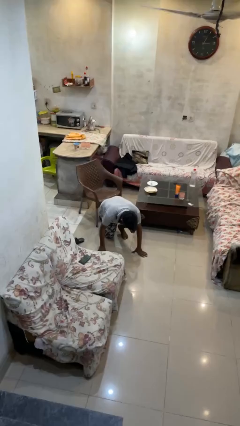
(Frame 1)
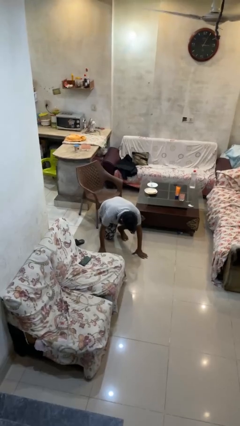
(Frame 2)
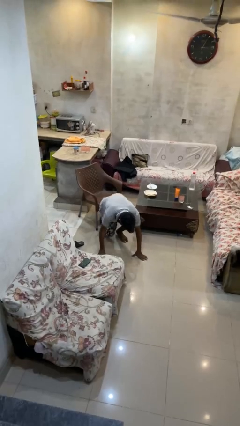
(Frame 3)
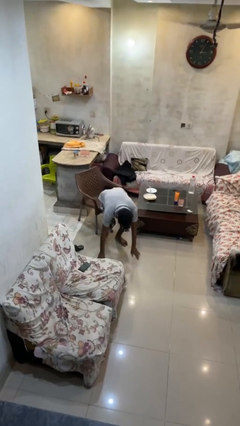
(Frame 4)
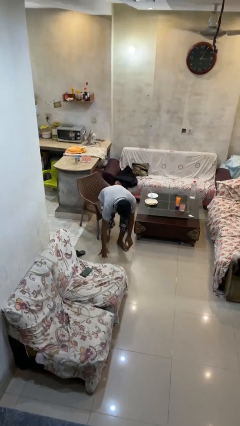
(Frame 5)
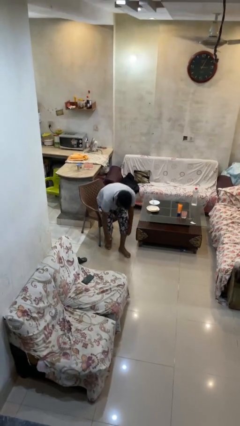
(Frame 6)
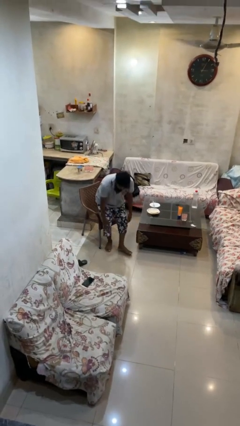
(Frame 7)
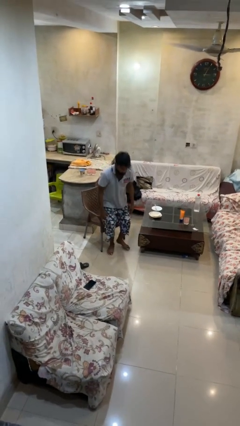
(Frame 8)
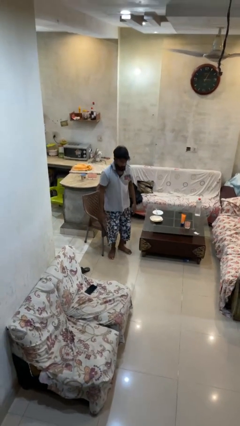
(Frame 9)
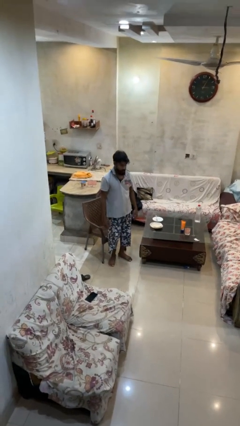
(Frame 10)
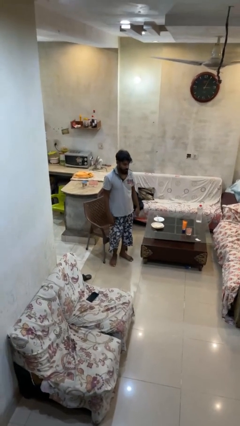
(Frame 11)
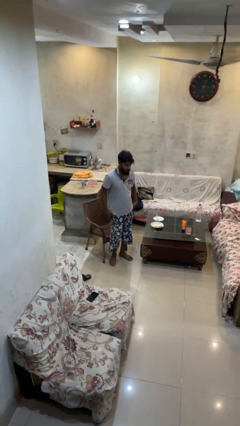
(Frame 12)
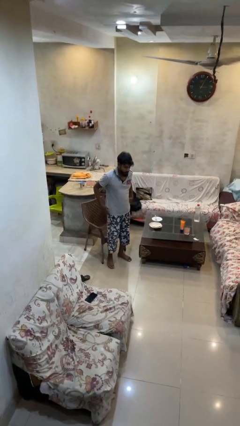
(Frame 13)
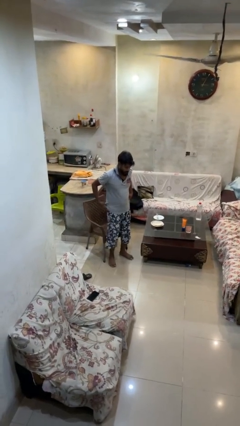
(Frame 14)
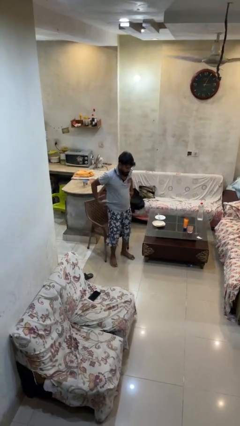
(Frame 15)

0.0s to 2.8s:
person stands up from floor

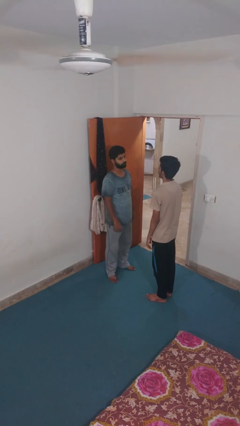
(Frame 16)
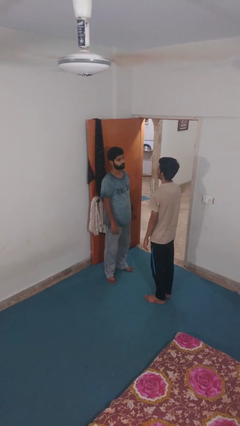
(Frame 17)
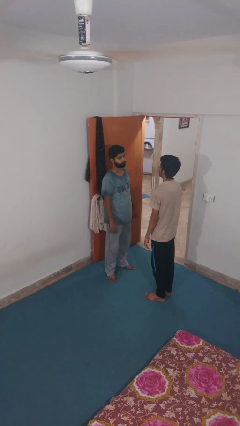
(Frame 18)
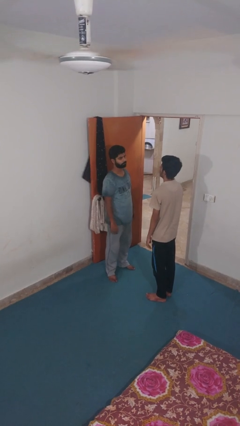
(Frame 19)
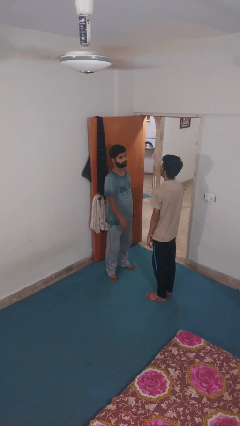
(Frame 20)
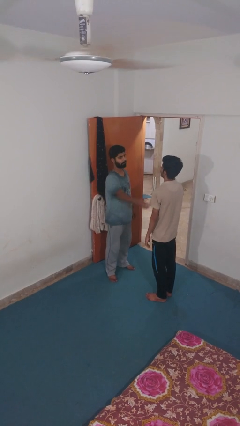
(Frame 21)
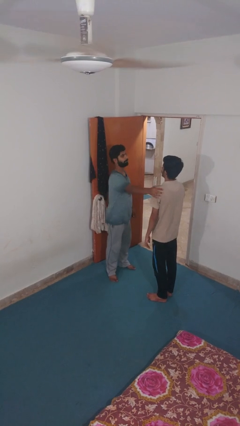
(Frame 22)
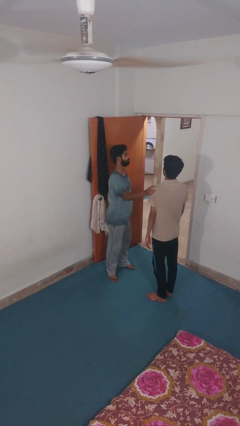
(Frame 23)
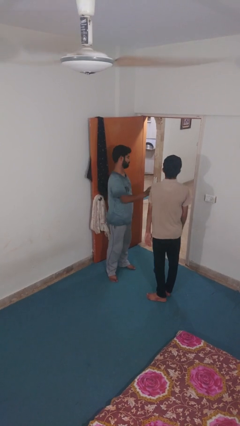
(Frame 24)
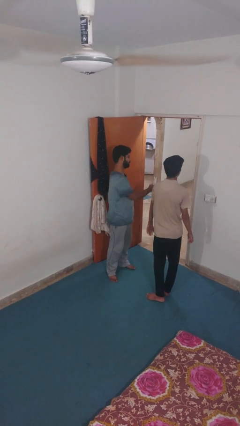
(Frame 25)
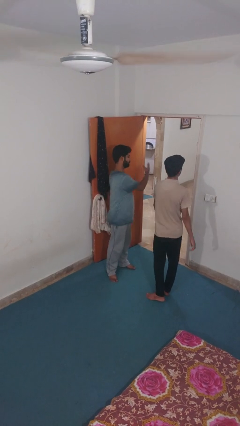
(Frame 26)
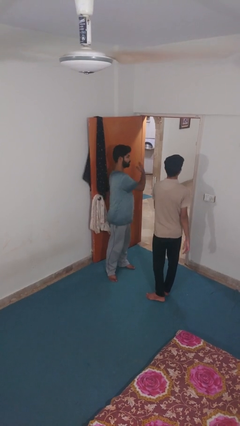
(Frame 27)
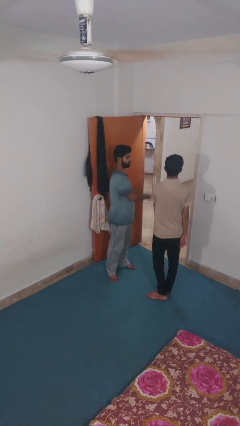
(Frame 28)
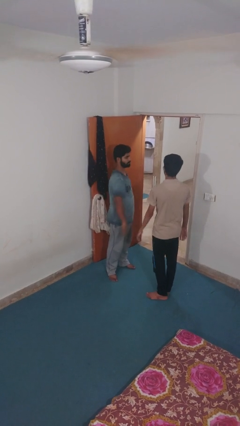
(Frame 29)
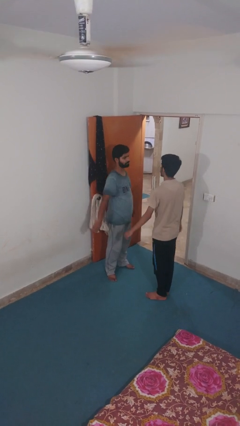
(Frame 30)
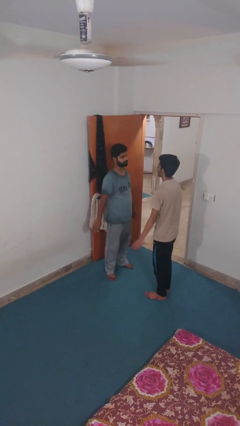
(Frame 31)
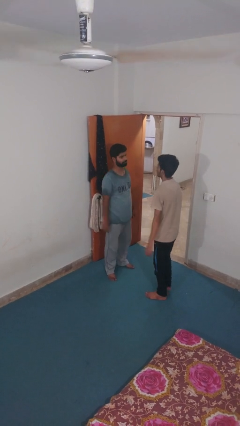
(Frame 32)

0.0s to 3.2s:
person shoves person

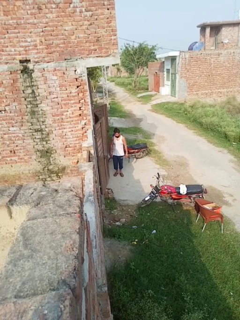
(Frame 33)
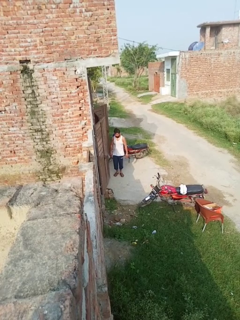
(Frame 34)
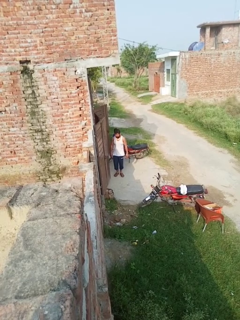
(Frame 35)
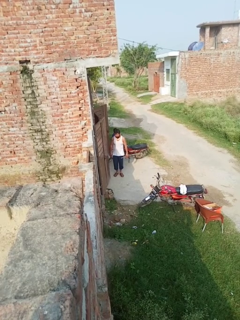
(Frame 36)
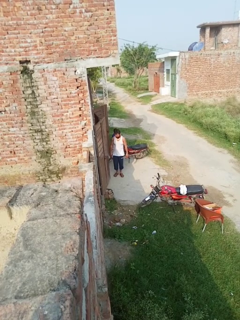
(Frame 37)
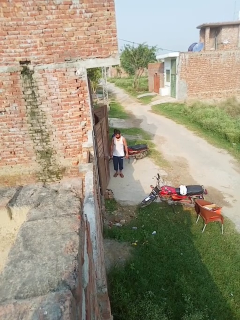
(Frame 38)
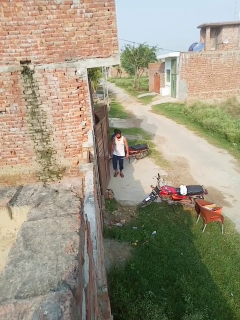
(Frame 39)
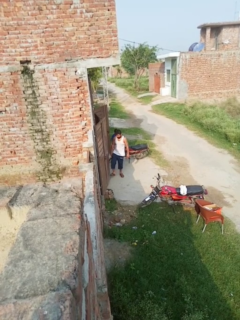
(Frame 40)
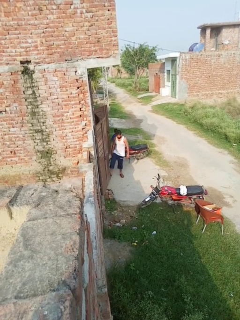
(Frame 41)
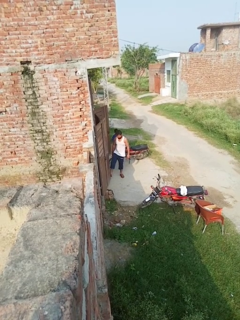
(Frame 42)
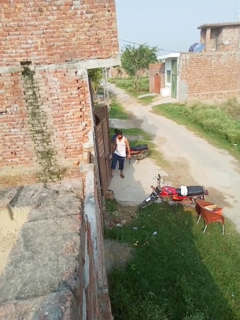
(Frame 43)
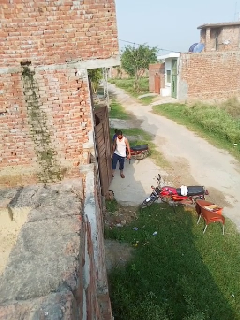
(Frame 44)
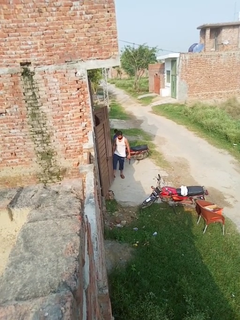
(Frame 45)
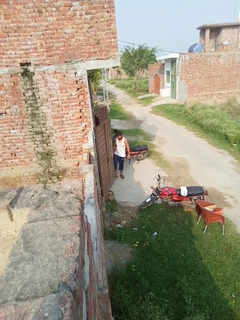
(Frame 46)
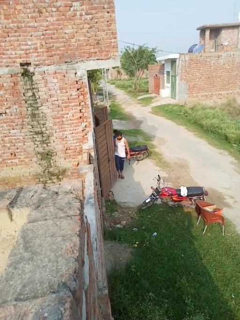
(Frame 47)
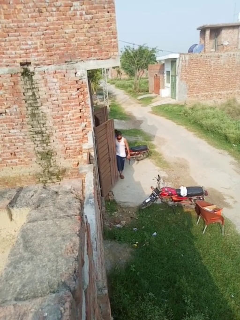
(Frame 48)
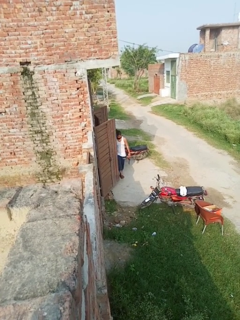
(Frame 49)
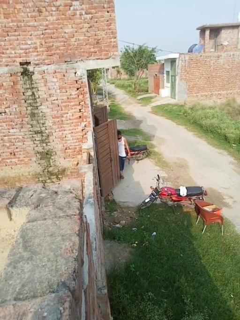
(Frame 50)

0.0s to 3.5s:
person opens facility door

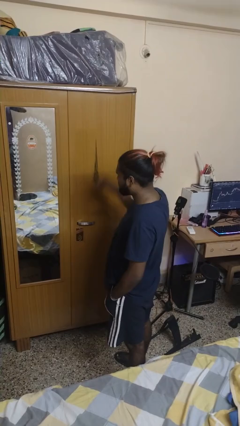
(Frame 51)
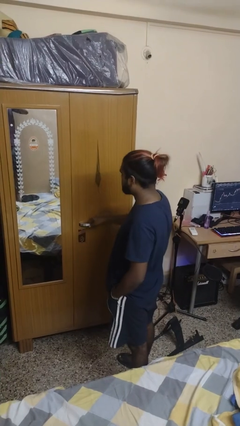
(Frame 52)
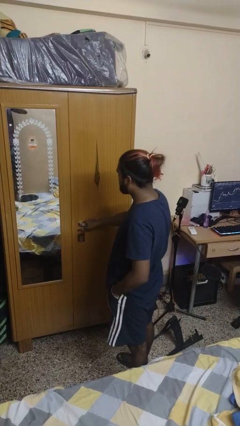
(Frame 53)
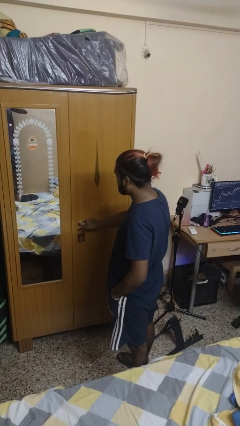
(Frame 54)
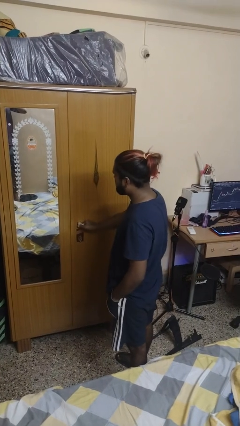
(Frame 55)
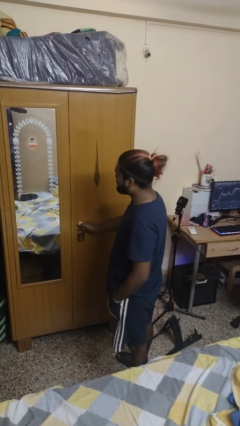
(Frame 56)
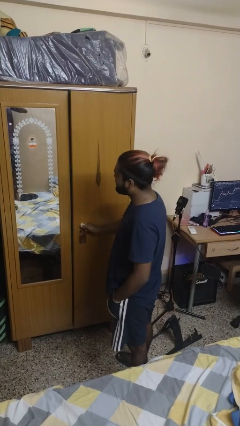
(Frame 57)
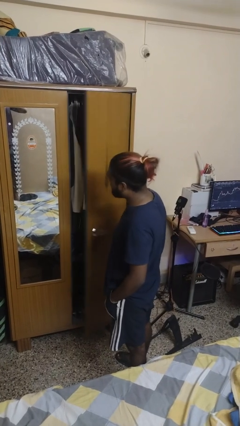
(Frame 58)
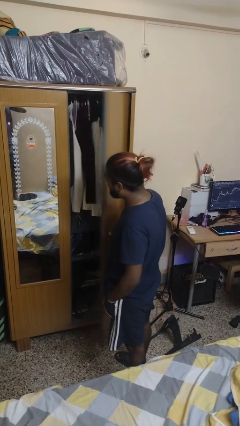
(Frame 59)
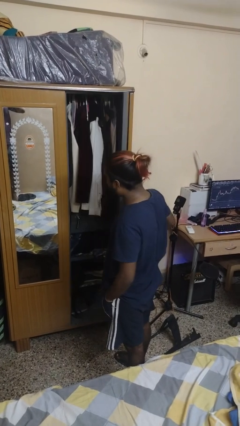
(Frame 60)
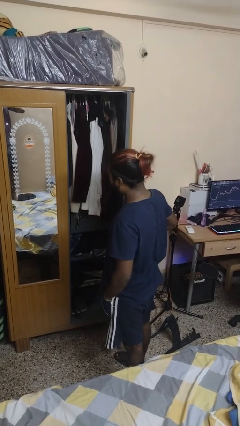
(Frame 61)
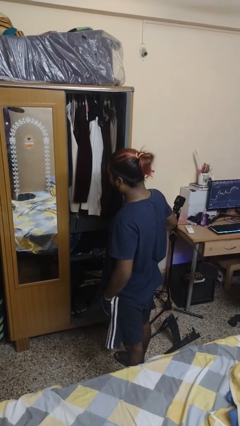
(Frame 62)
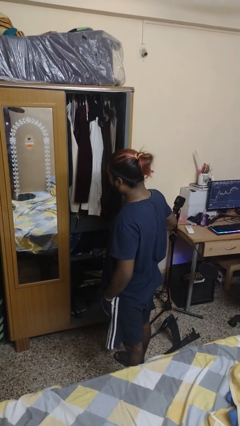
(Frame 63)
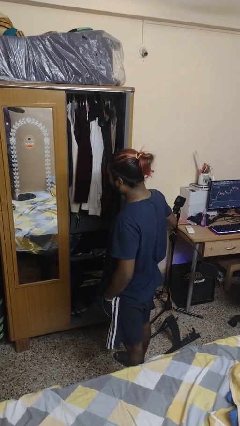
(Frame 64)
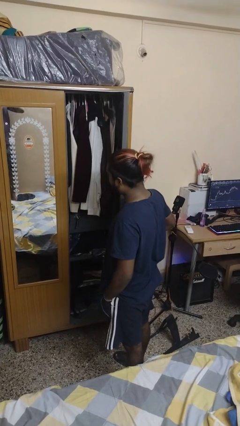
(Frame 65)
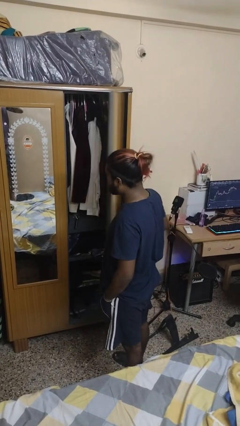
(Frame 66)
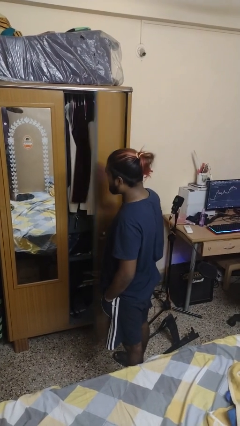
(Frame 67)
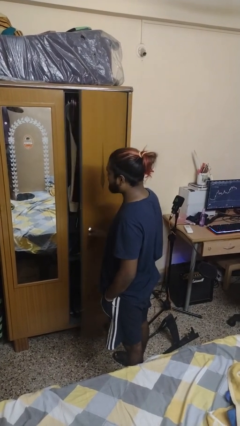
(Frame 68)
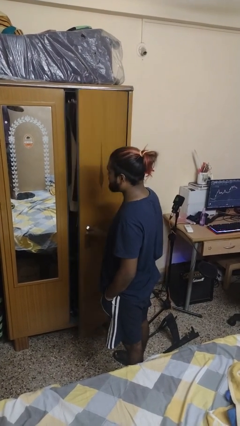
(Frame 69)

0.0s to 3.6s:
person closes cabinet

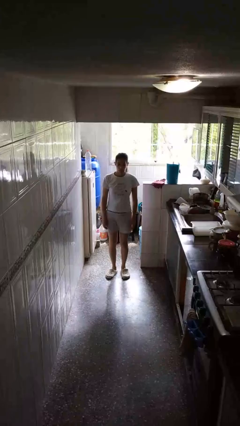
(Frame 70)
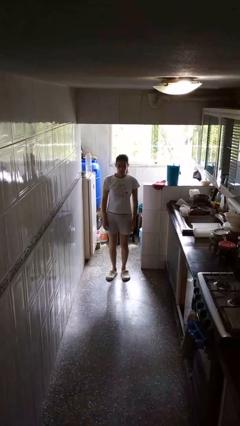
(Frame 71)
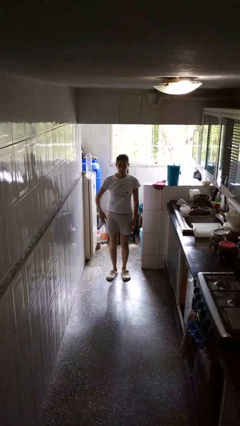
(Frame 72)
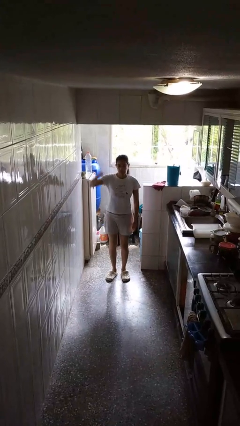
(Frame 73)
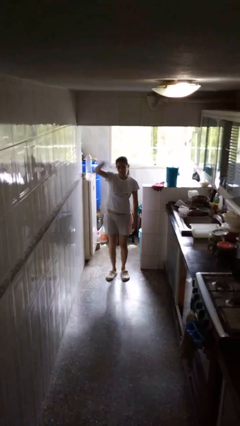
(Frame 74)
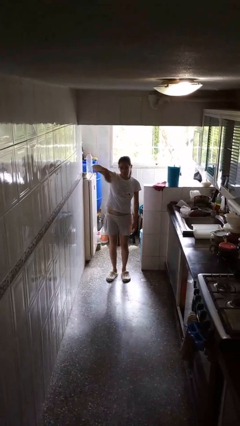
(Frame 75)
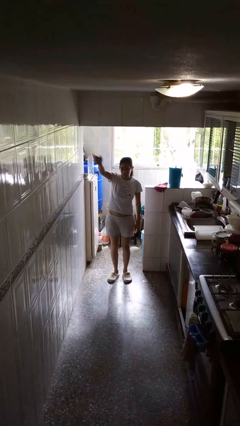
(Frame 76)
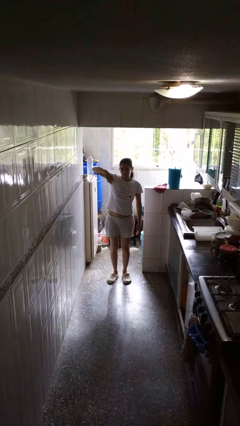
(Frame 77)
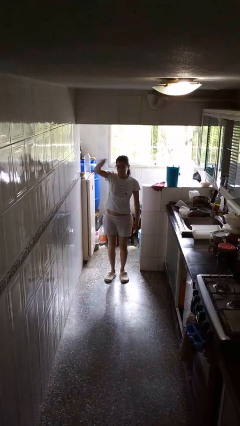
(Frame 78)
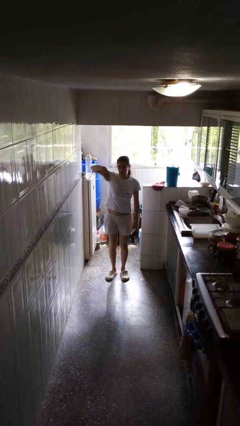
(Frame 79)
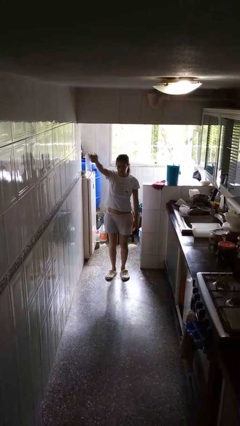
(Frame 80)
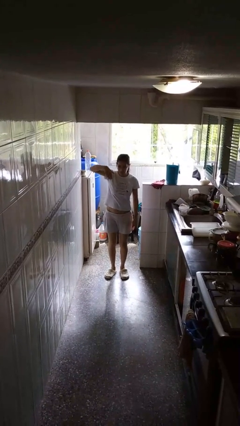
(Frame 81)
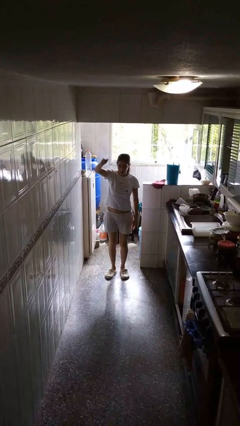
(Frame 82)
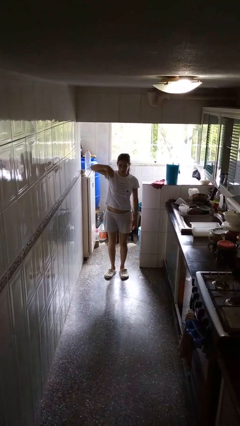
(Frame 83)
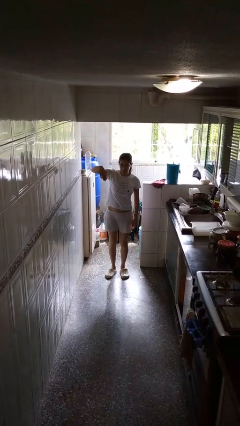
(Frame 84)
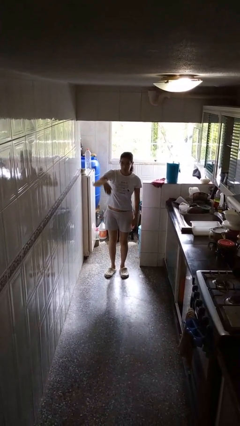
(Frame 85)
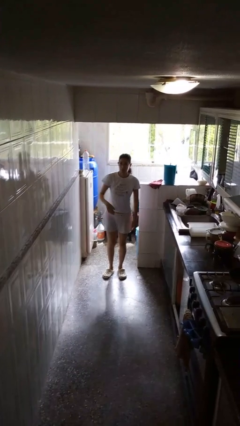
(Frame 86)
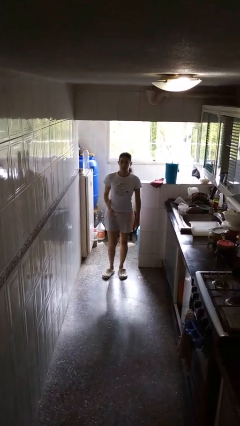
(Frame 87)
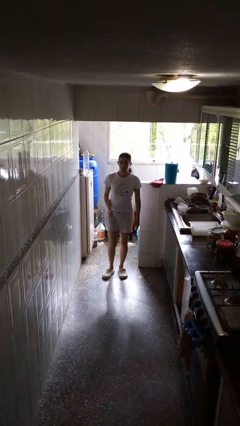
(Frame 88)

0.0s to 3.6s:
person gestures come here

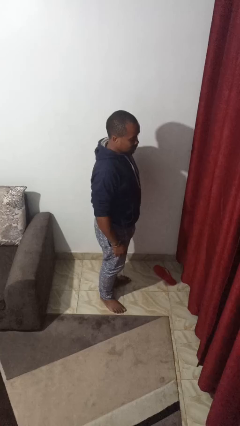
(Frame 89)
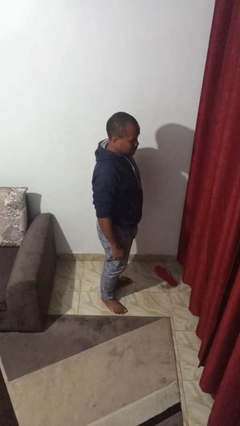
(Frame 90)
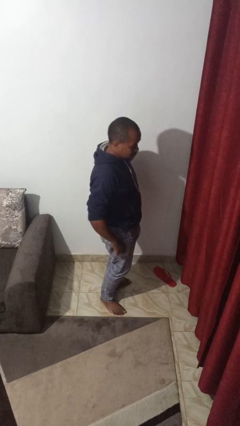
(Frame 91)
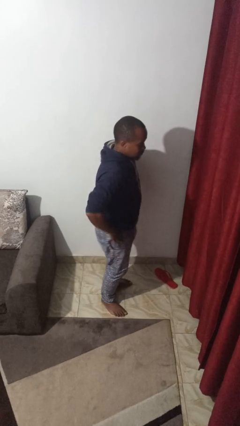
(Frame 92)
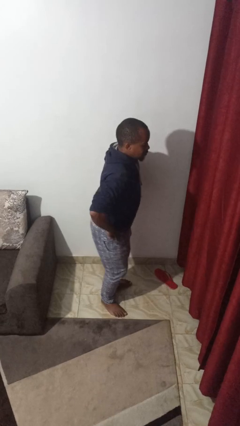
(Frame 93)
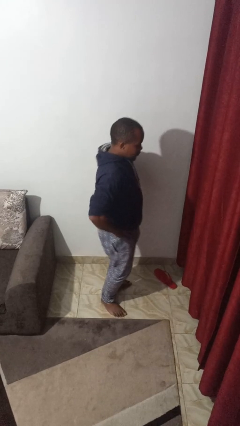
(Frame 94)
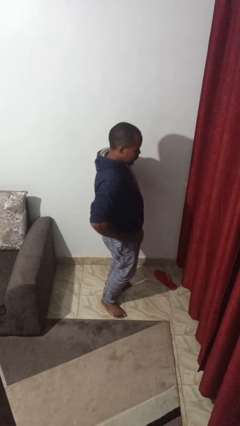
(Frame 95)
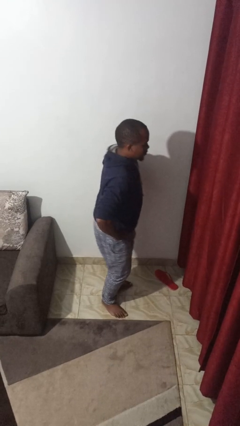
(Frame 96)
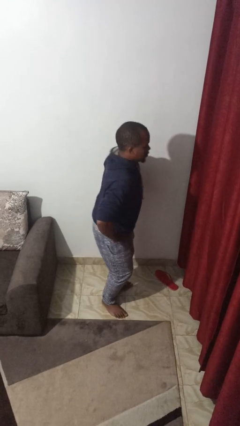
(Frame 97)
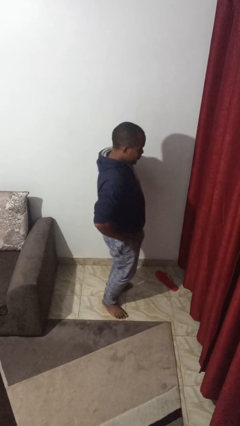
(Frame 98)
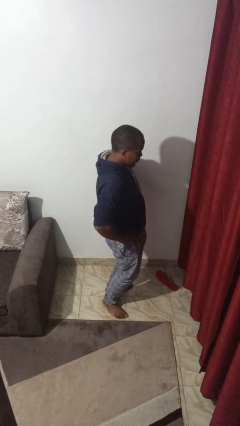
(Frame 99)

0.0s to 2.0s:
person wiggles hips

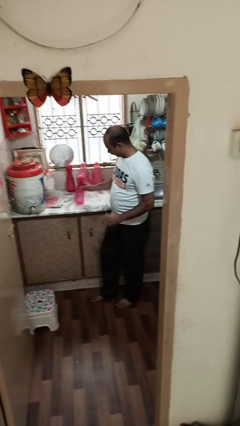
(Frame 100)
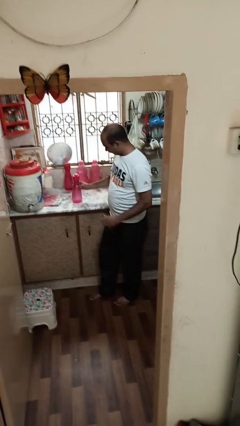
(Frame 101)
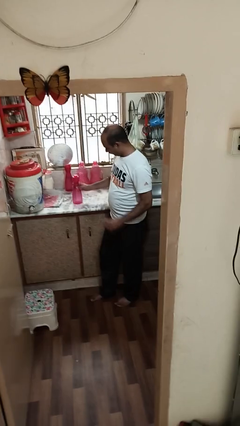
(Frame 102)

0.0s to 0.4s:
person puts down object on countertop
